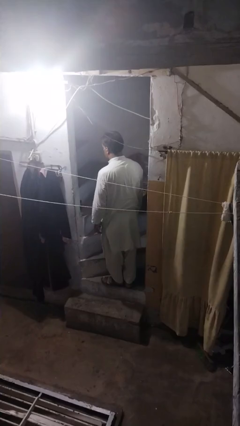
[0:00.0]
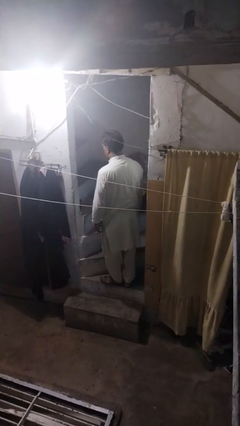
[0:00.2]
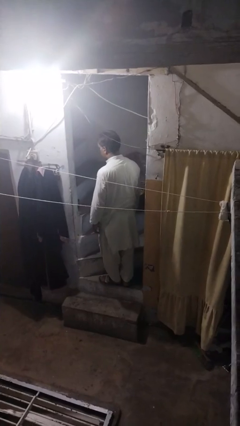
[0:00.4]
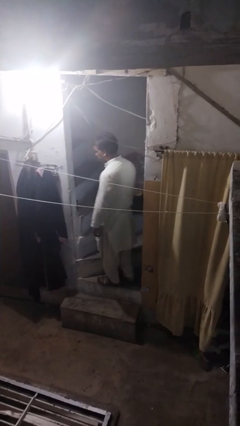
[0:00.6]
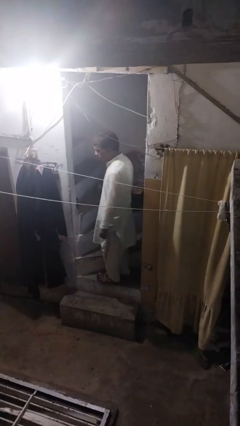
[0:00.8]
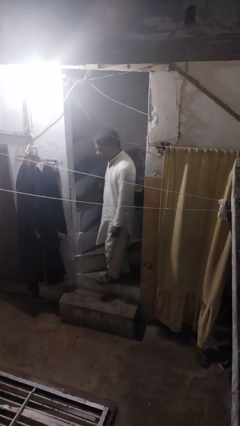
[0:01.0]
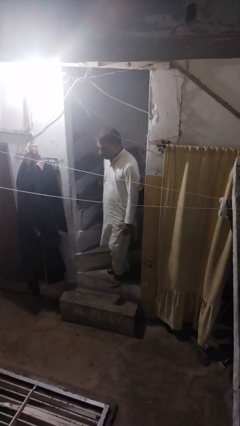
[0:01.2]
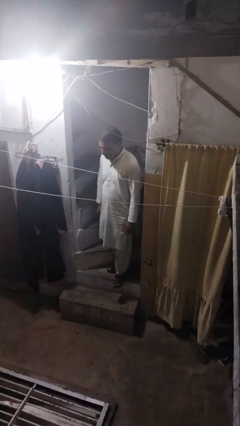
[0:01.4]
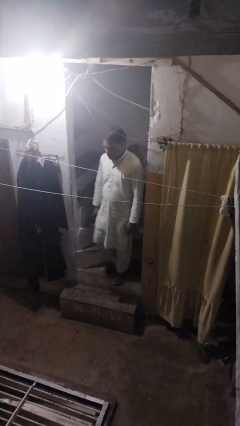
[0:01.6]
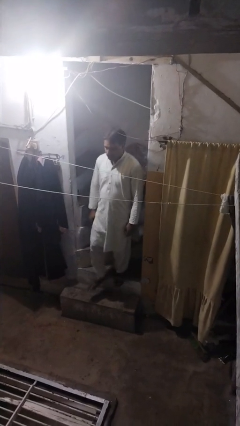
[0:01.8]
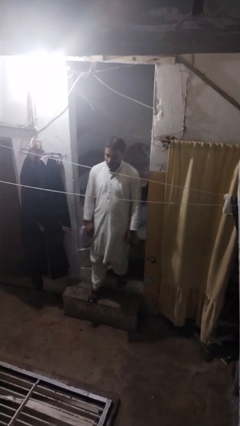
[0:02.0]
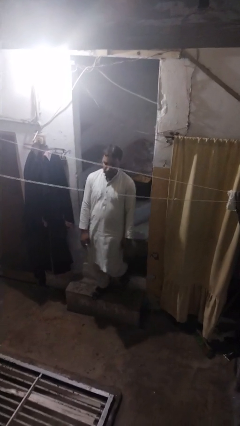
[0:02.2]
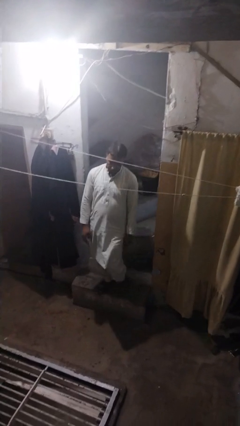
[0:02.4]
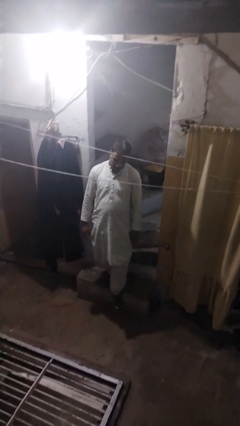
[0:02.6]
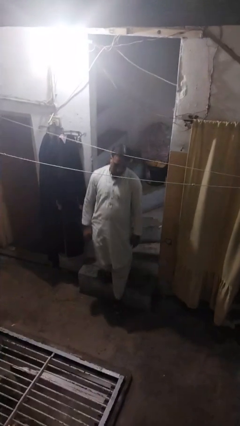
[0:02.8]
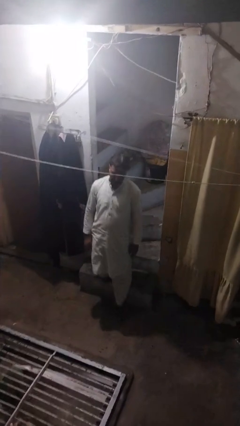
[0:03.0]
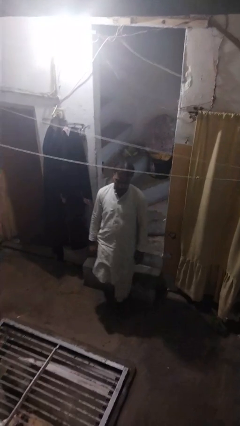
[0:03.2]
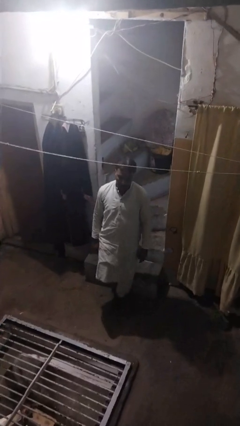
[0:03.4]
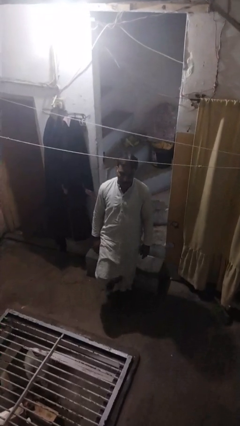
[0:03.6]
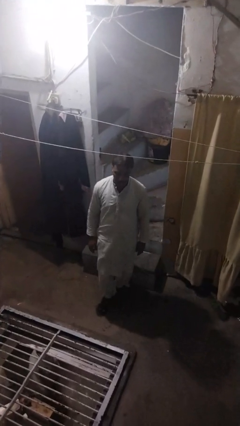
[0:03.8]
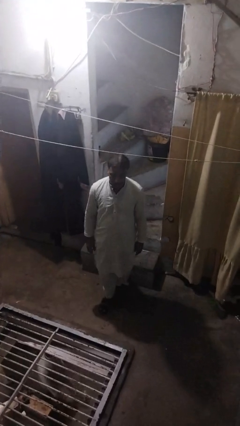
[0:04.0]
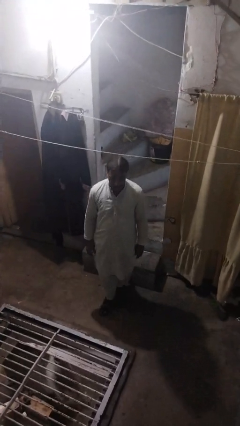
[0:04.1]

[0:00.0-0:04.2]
person climbs down stairs

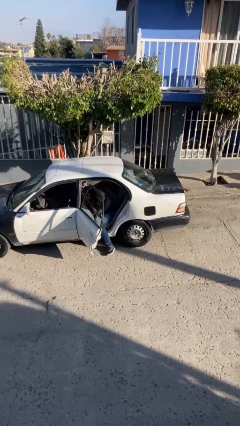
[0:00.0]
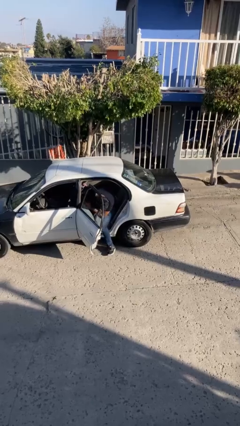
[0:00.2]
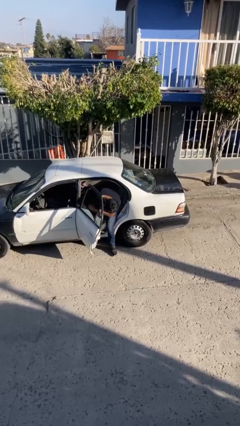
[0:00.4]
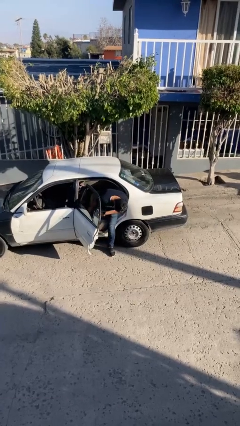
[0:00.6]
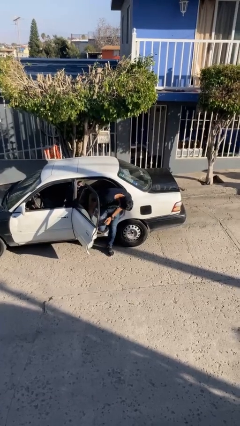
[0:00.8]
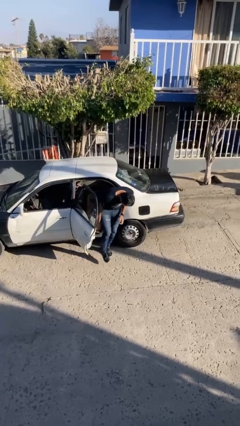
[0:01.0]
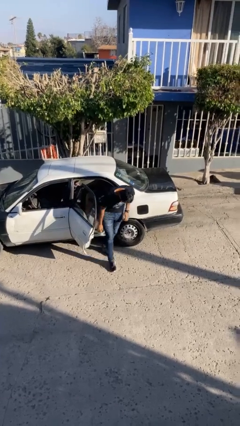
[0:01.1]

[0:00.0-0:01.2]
person exits car

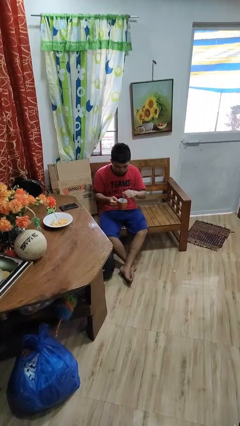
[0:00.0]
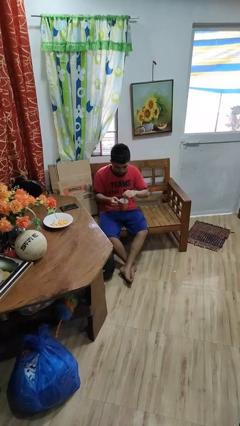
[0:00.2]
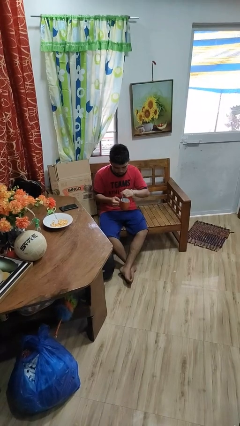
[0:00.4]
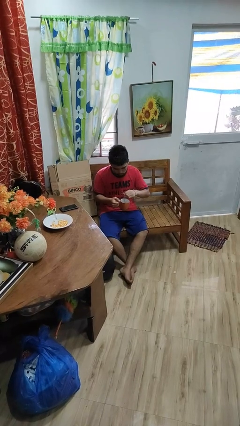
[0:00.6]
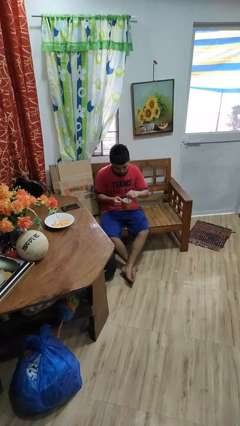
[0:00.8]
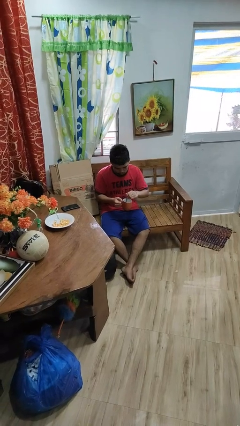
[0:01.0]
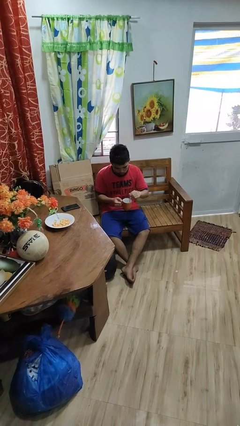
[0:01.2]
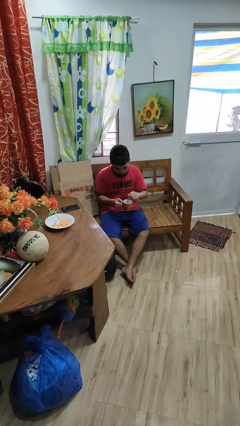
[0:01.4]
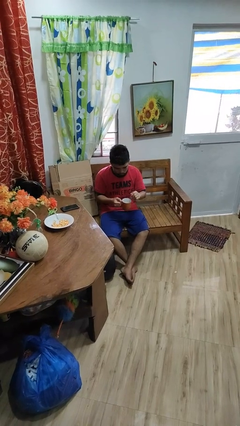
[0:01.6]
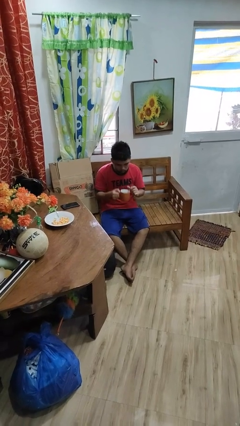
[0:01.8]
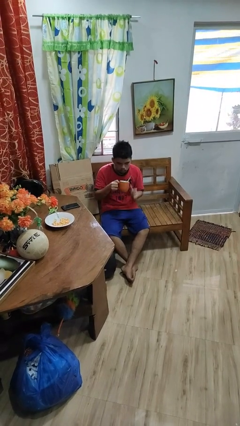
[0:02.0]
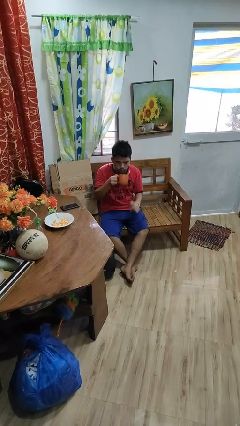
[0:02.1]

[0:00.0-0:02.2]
person stirs mug

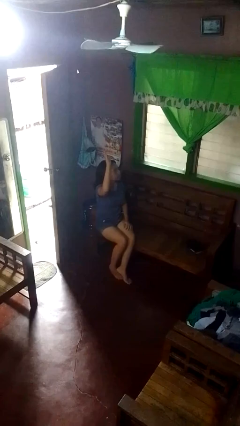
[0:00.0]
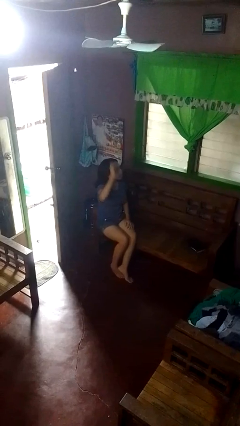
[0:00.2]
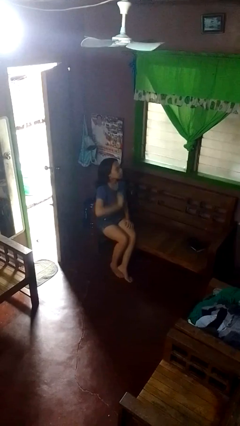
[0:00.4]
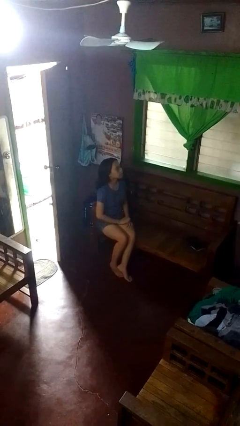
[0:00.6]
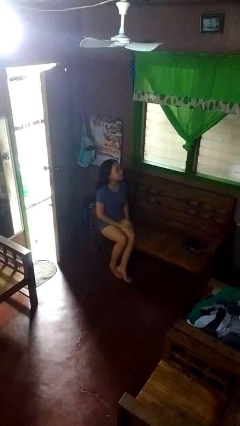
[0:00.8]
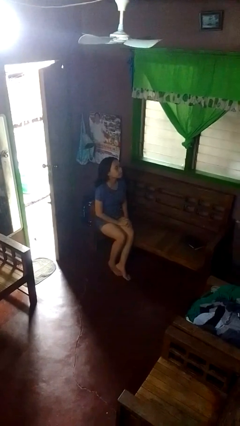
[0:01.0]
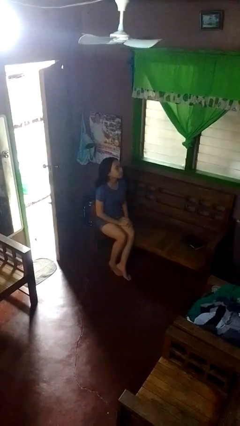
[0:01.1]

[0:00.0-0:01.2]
person gestures lower hand

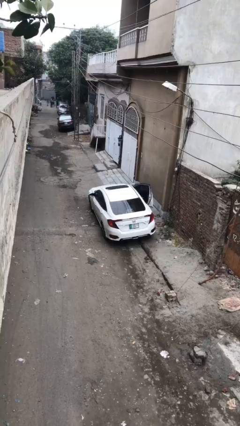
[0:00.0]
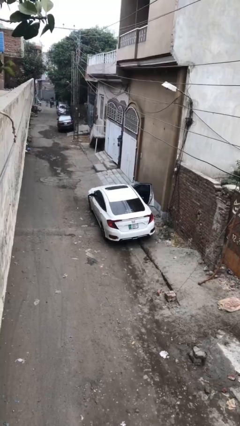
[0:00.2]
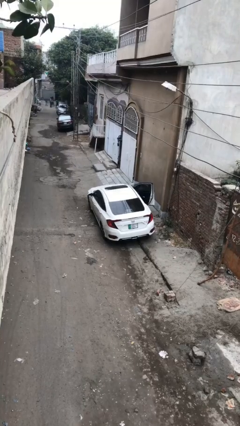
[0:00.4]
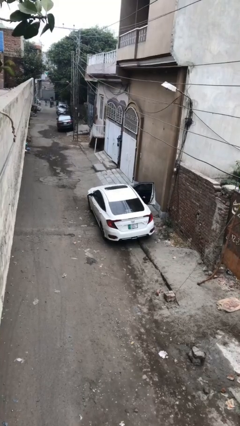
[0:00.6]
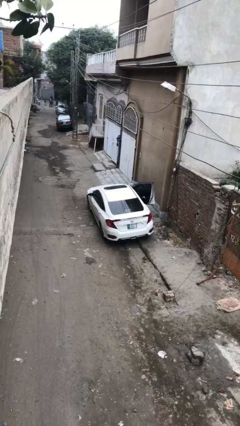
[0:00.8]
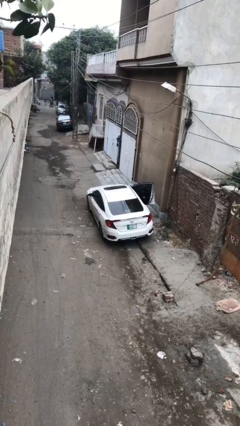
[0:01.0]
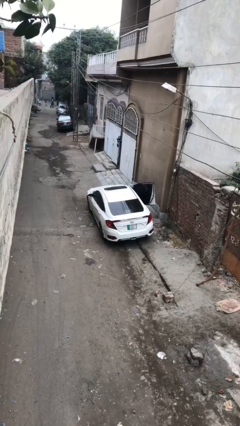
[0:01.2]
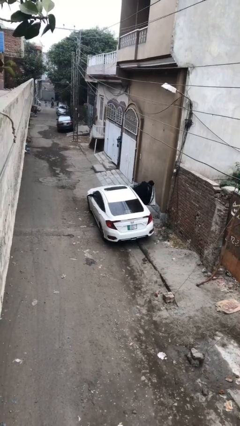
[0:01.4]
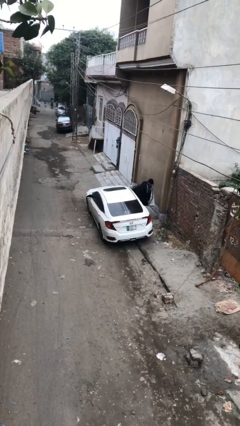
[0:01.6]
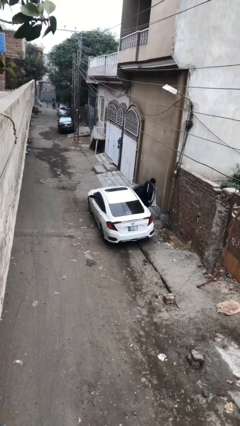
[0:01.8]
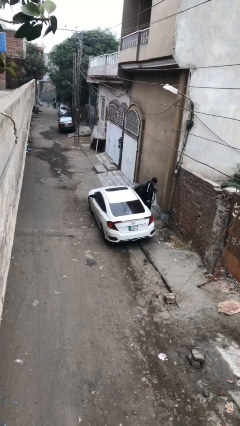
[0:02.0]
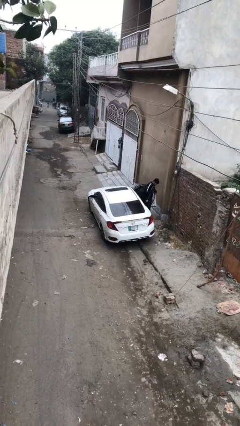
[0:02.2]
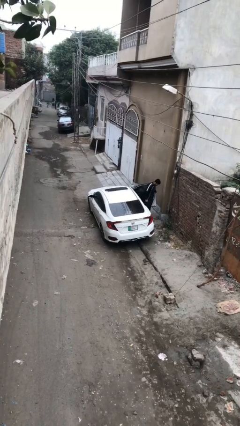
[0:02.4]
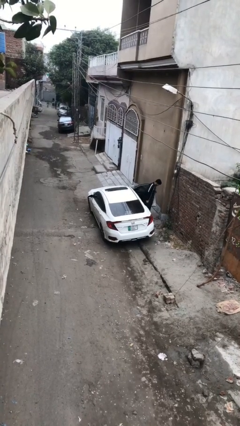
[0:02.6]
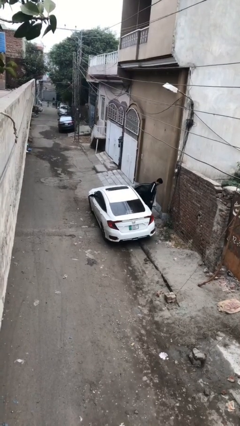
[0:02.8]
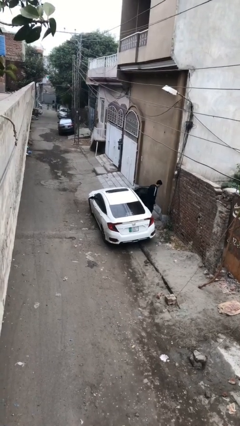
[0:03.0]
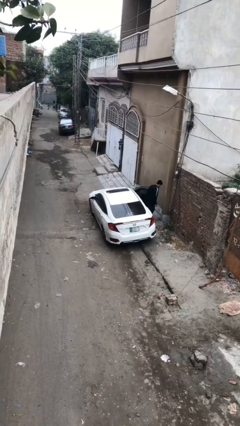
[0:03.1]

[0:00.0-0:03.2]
car drops off person

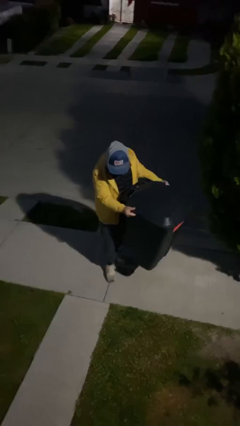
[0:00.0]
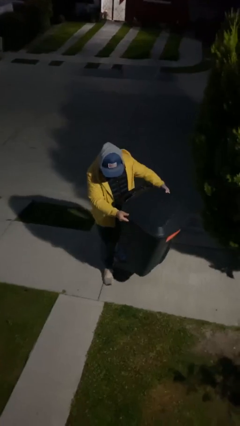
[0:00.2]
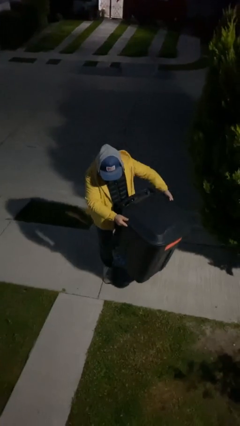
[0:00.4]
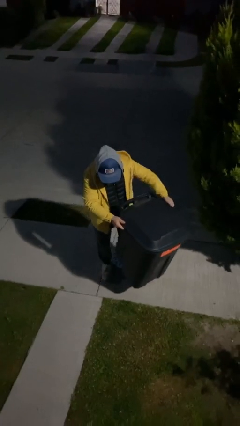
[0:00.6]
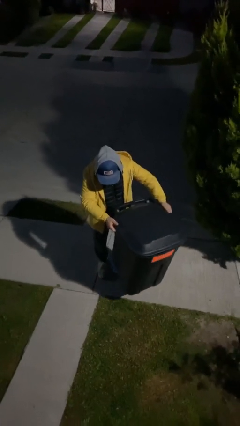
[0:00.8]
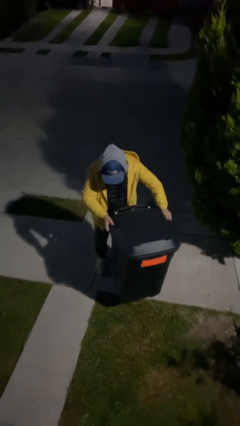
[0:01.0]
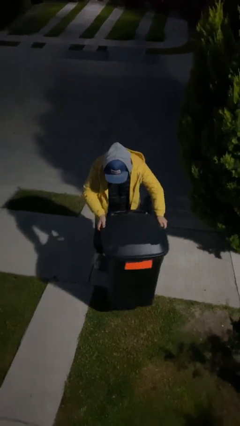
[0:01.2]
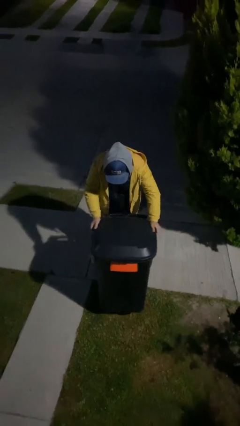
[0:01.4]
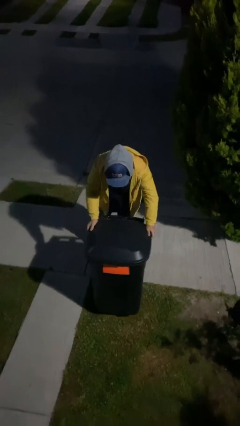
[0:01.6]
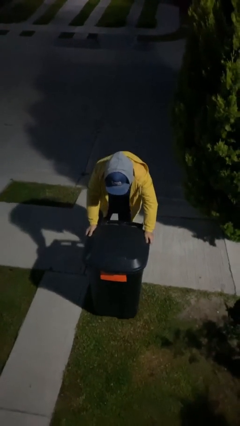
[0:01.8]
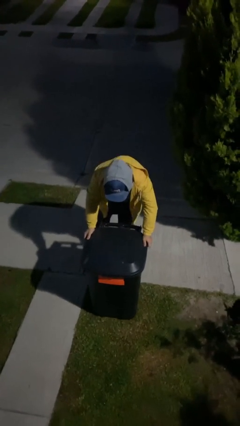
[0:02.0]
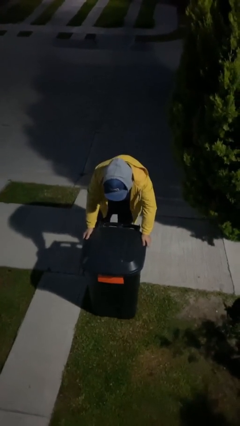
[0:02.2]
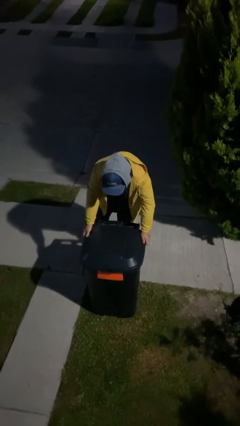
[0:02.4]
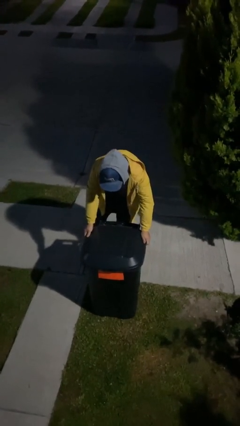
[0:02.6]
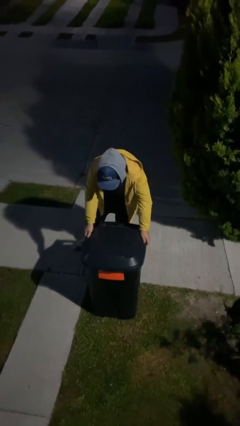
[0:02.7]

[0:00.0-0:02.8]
person puts down object on floor

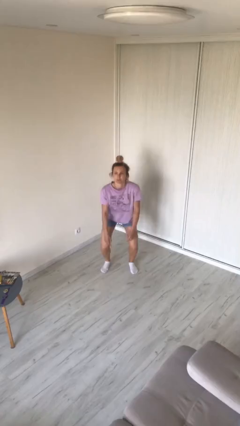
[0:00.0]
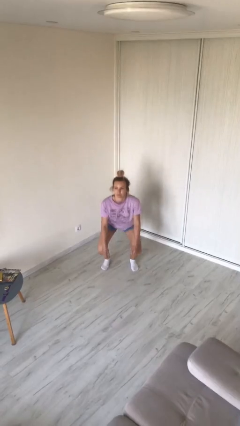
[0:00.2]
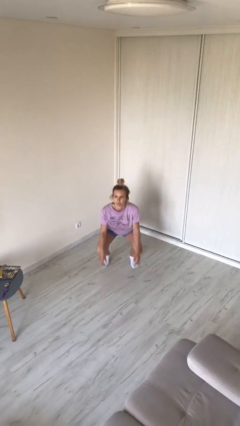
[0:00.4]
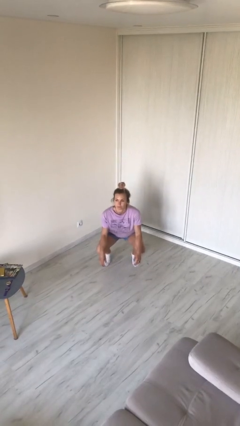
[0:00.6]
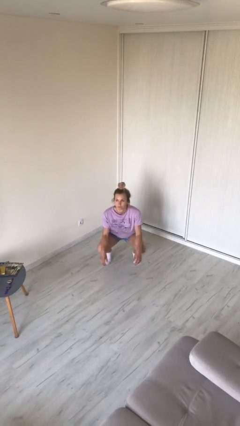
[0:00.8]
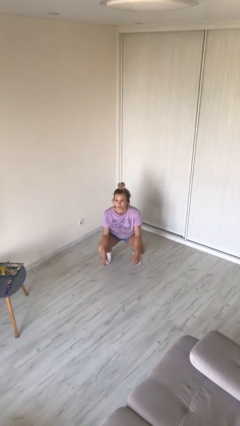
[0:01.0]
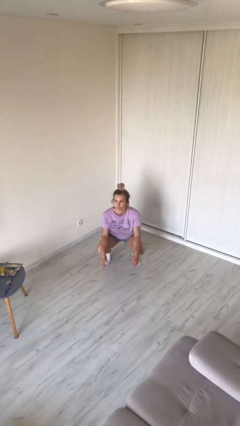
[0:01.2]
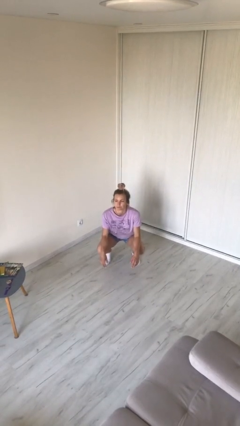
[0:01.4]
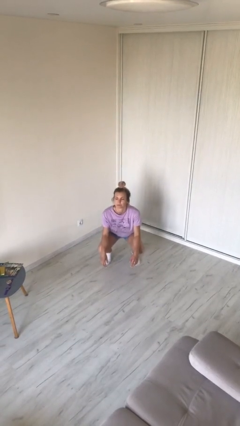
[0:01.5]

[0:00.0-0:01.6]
person squats

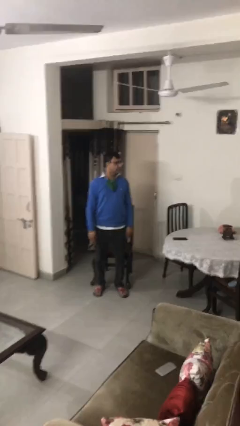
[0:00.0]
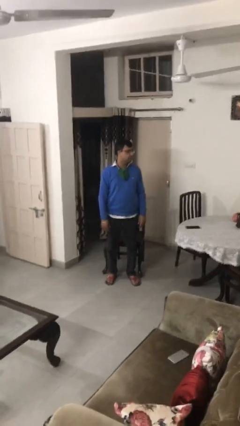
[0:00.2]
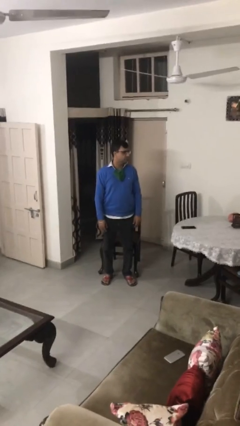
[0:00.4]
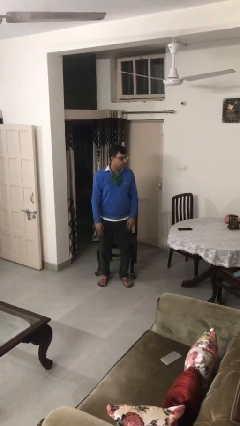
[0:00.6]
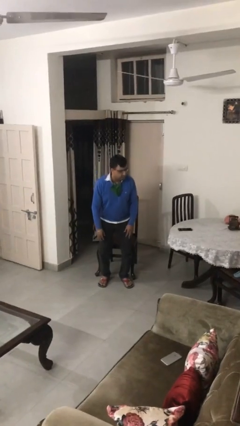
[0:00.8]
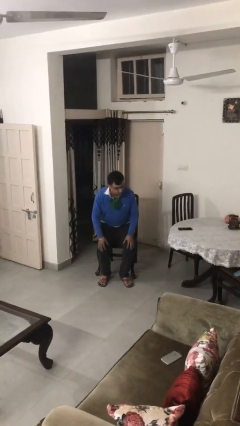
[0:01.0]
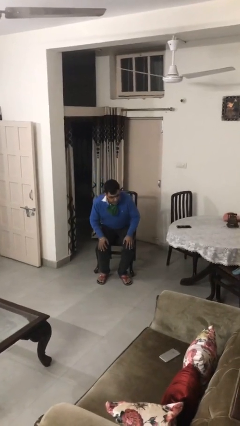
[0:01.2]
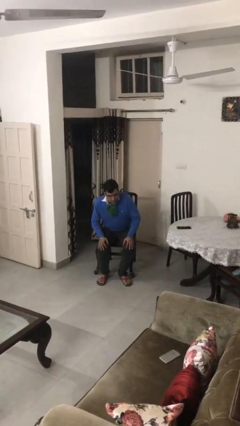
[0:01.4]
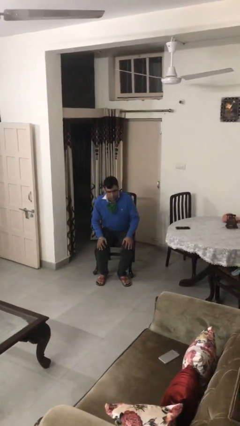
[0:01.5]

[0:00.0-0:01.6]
person sits down
